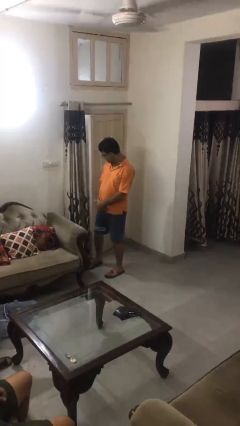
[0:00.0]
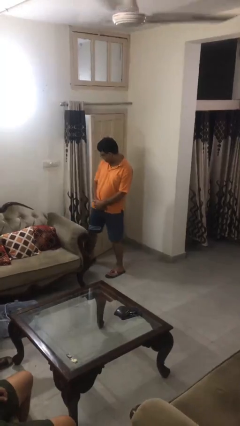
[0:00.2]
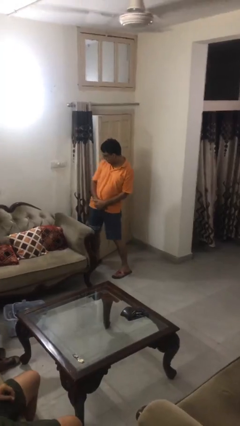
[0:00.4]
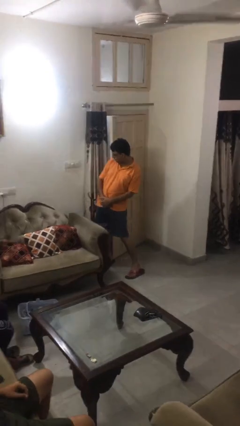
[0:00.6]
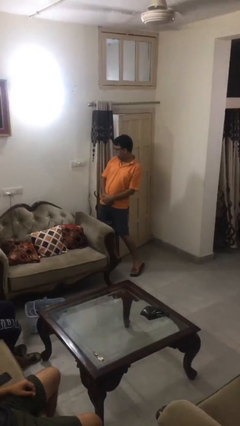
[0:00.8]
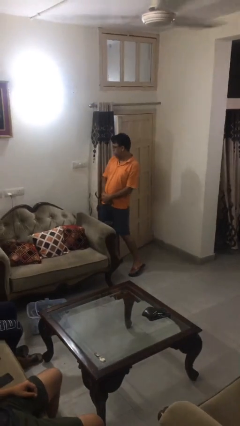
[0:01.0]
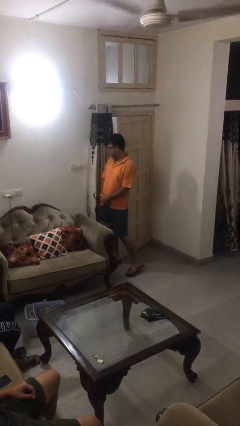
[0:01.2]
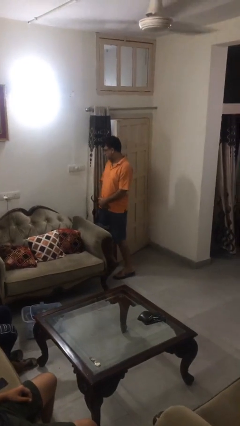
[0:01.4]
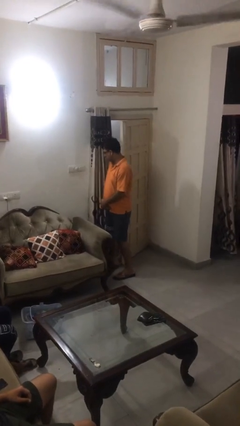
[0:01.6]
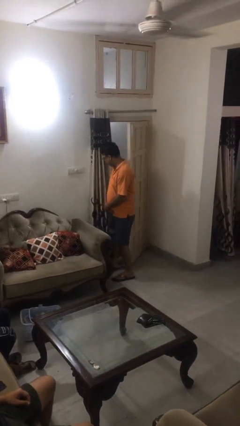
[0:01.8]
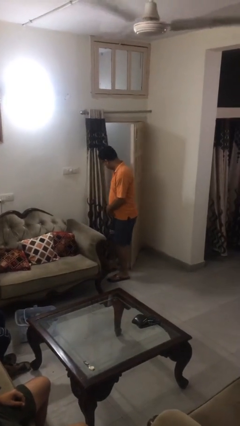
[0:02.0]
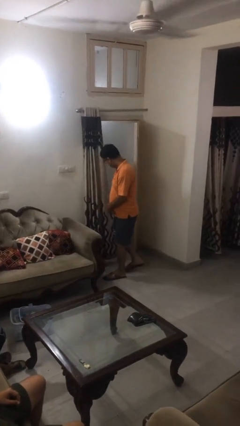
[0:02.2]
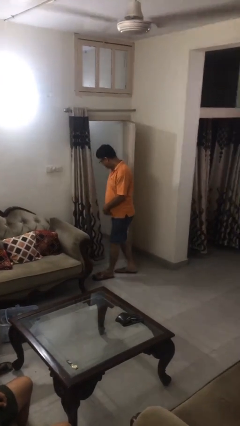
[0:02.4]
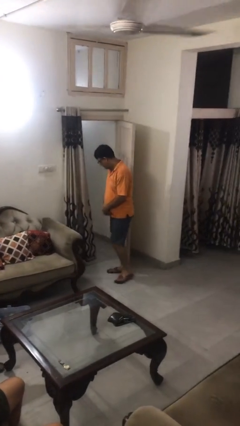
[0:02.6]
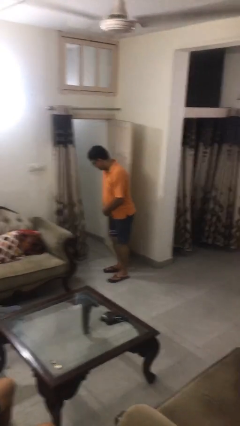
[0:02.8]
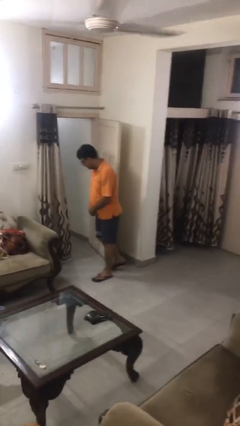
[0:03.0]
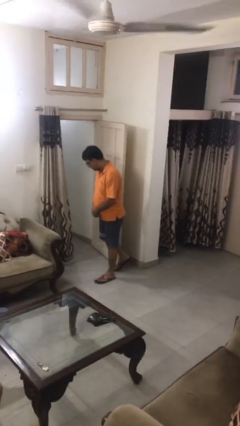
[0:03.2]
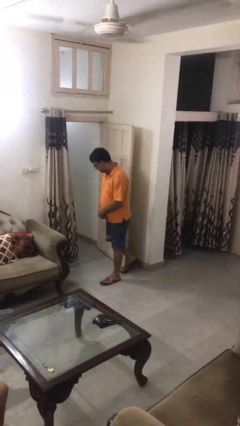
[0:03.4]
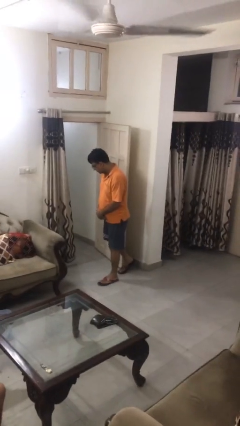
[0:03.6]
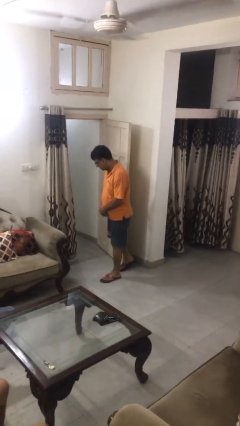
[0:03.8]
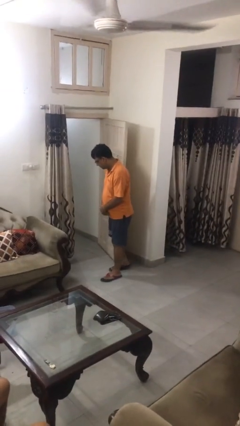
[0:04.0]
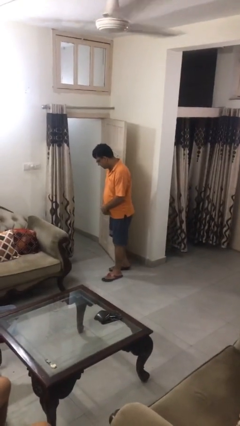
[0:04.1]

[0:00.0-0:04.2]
person opens facility door

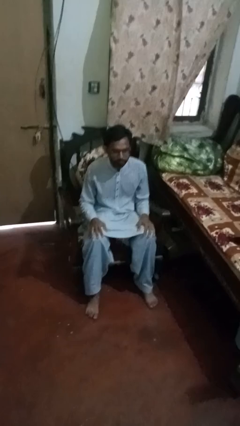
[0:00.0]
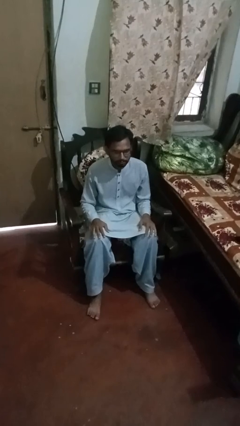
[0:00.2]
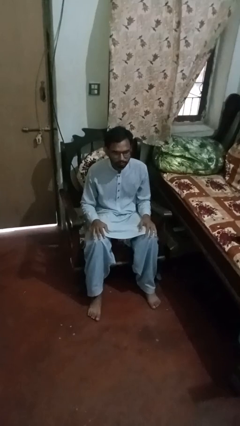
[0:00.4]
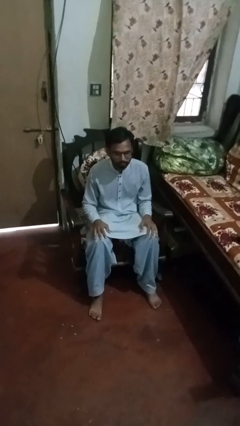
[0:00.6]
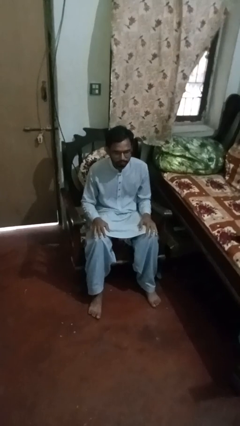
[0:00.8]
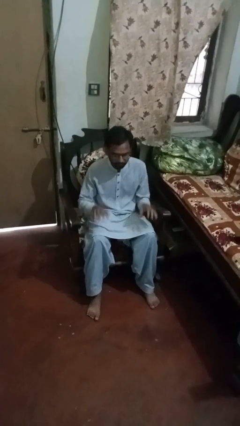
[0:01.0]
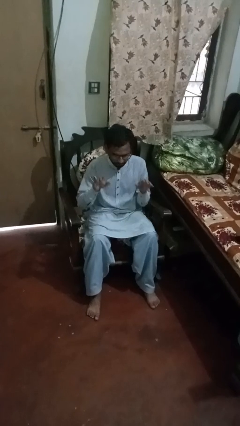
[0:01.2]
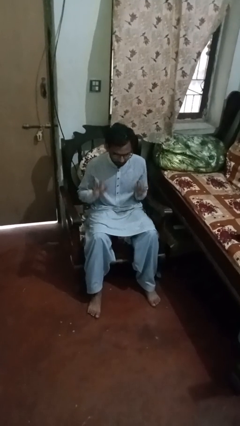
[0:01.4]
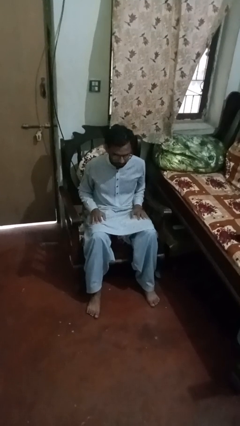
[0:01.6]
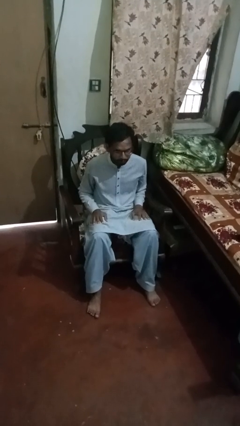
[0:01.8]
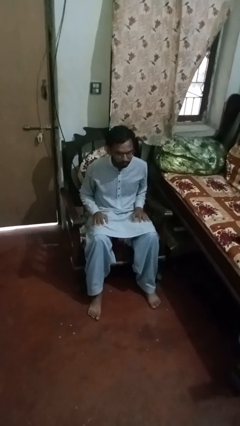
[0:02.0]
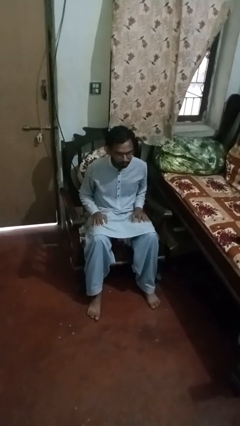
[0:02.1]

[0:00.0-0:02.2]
person slaps hands on thighs

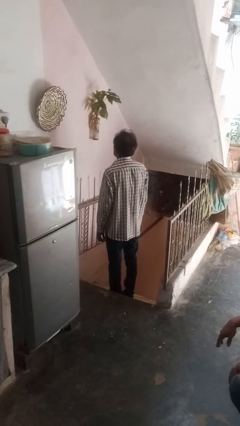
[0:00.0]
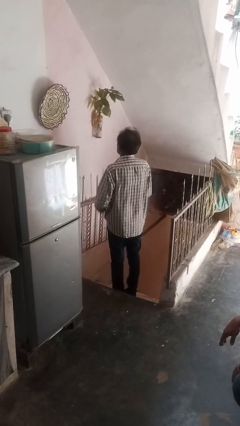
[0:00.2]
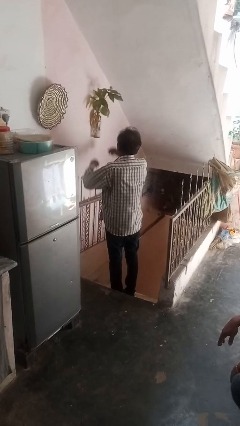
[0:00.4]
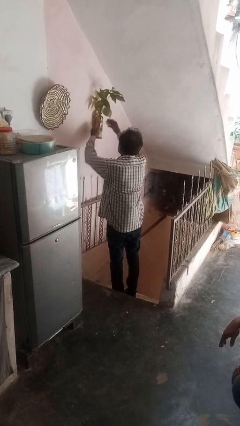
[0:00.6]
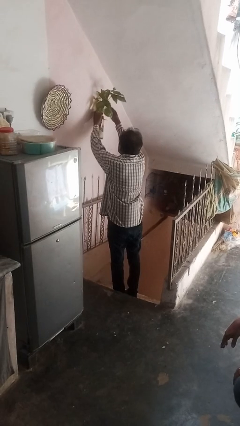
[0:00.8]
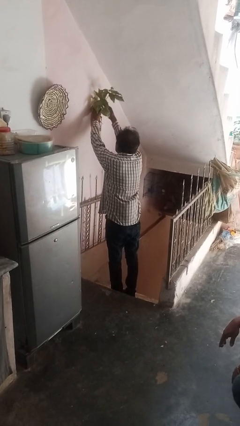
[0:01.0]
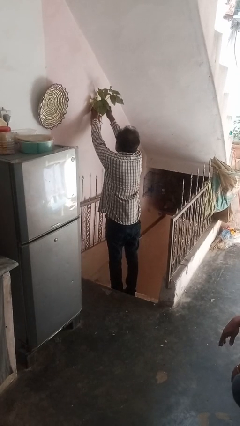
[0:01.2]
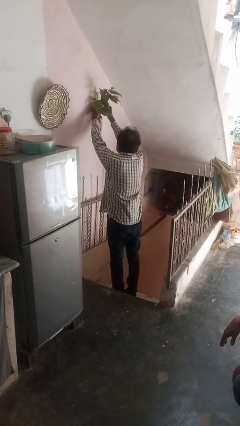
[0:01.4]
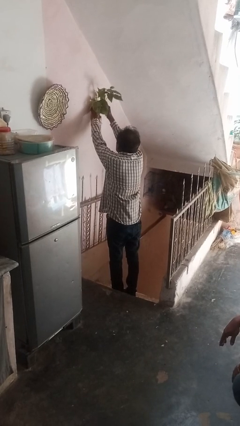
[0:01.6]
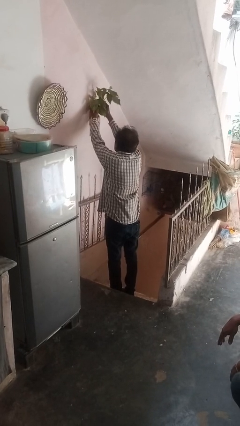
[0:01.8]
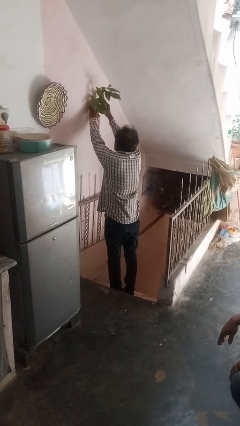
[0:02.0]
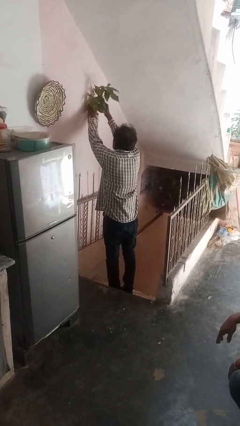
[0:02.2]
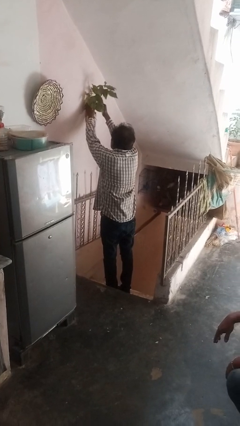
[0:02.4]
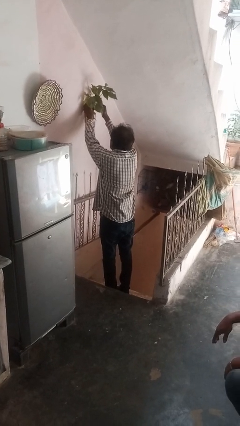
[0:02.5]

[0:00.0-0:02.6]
person bumps into table

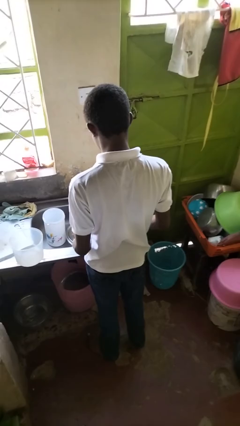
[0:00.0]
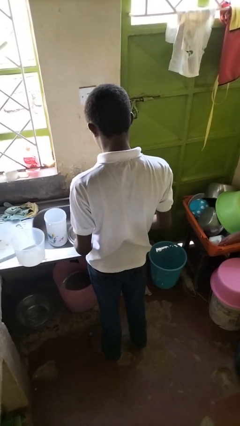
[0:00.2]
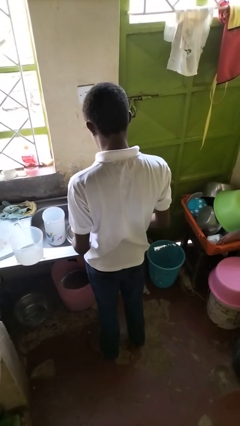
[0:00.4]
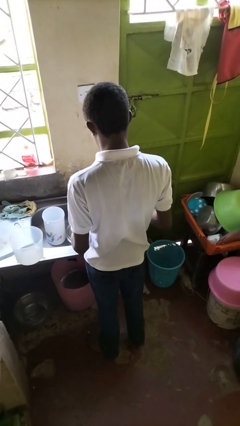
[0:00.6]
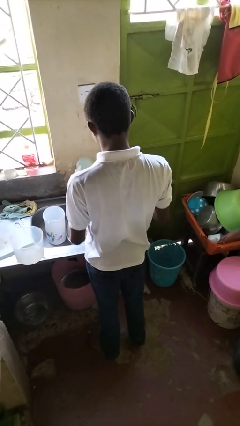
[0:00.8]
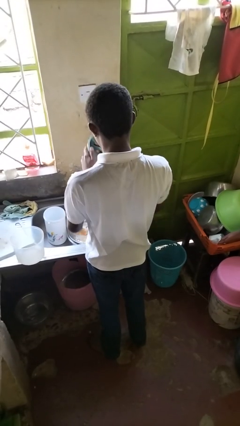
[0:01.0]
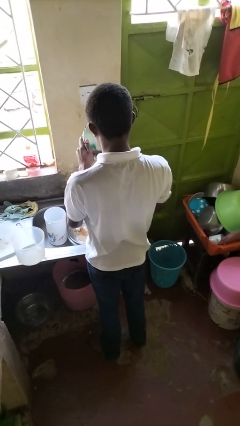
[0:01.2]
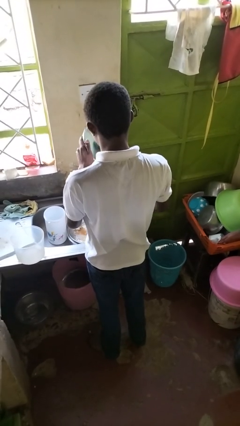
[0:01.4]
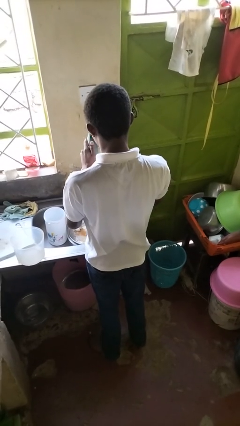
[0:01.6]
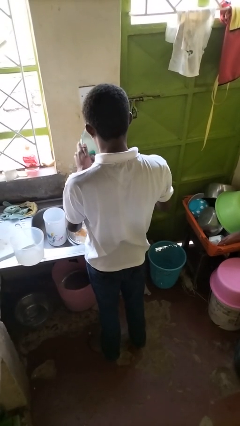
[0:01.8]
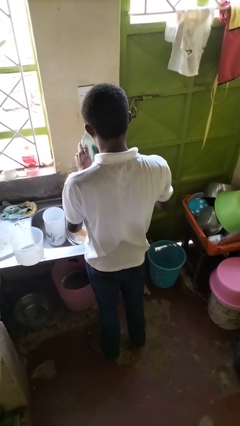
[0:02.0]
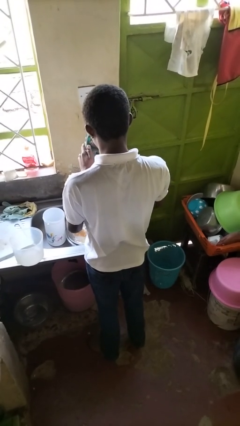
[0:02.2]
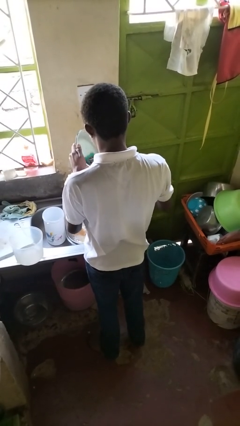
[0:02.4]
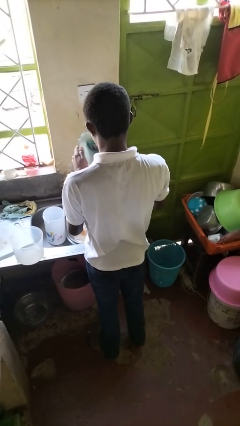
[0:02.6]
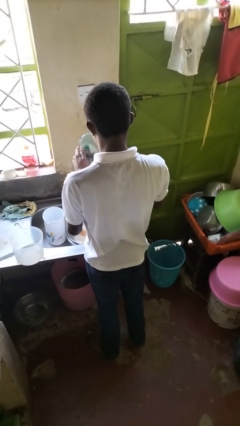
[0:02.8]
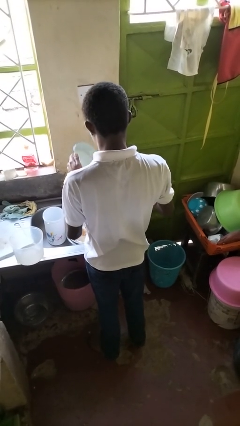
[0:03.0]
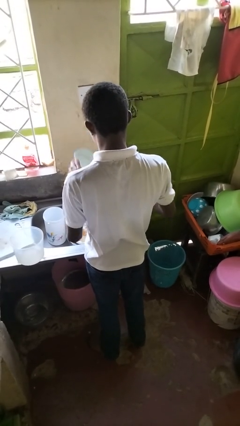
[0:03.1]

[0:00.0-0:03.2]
person washes dish

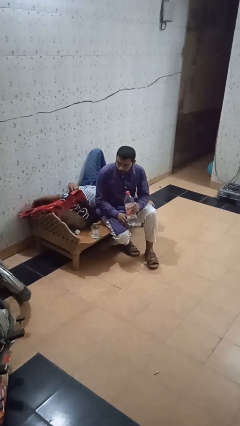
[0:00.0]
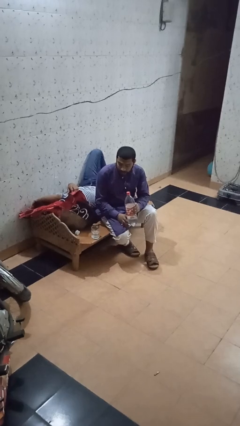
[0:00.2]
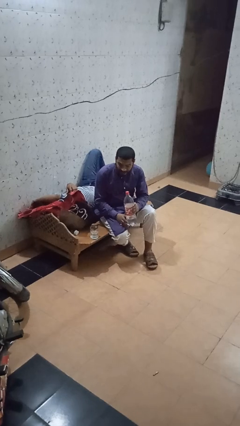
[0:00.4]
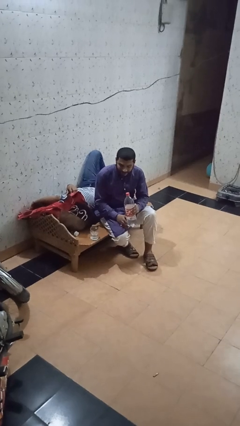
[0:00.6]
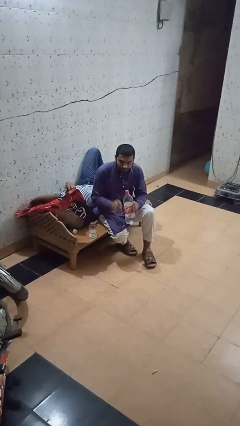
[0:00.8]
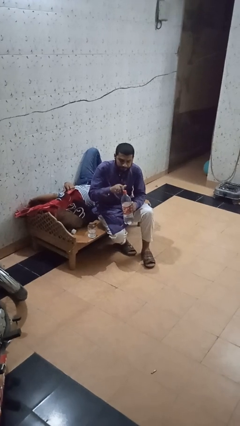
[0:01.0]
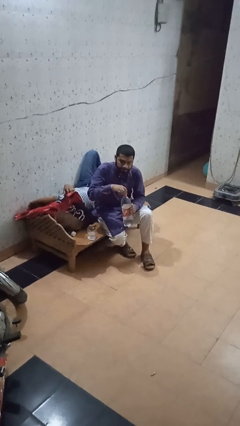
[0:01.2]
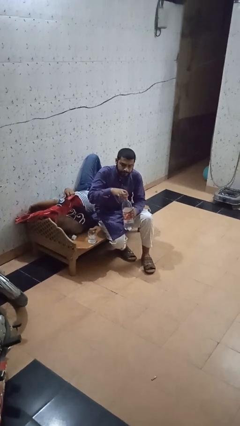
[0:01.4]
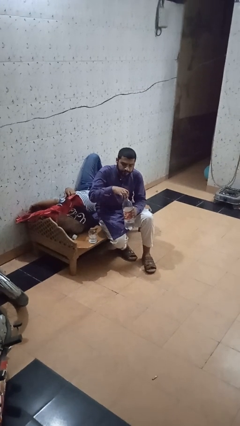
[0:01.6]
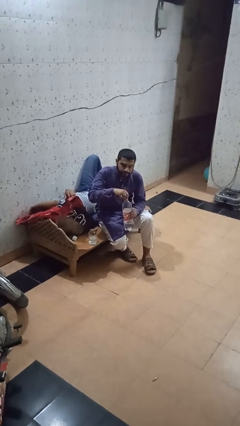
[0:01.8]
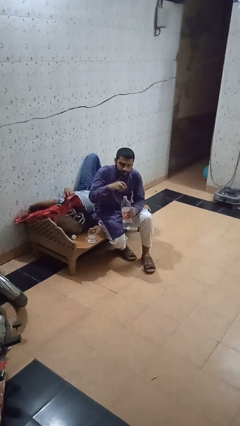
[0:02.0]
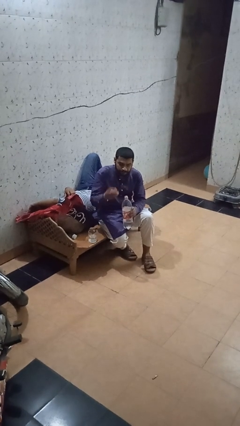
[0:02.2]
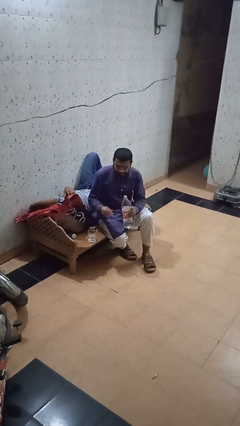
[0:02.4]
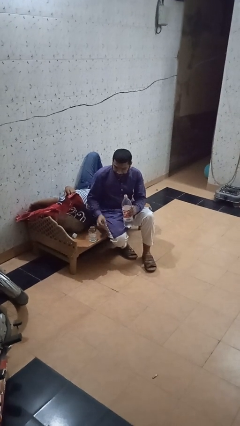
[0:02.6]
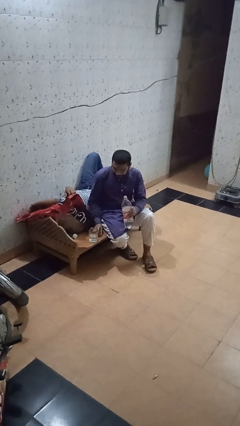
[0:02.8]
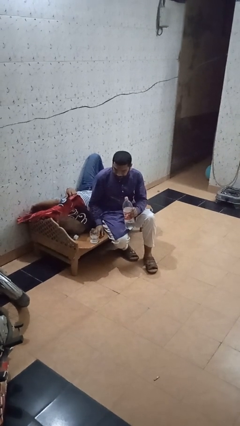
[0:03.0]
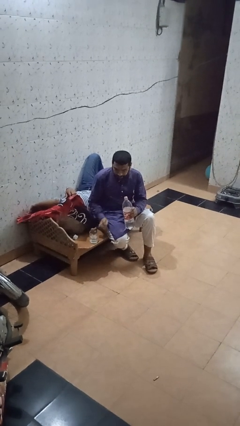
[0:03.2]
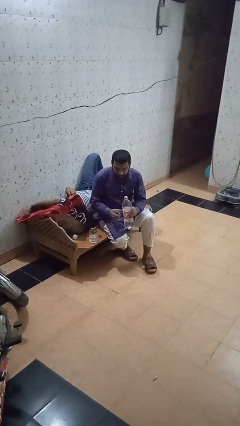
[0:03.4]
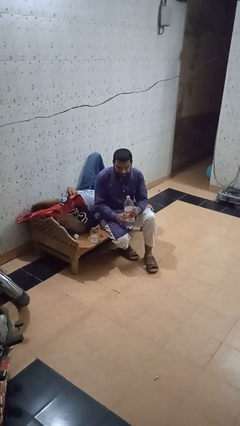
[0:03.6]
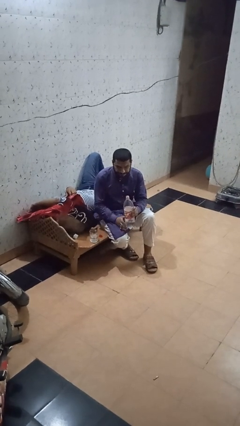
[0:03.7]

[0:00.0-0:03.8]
person unscrews lid from bottle

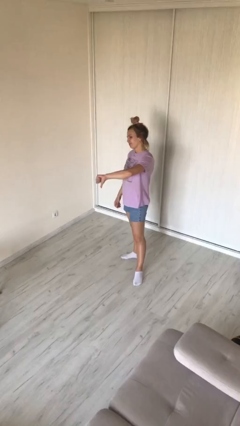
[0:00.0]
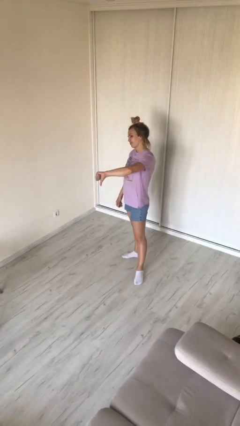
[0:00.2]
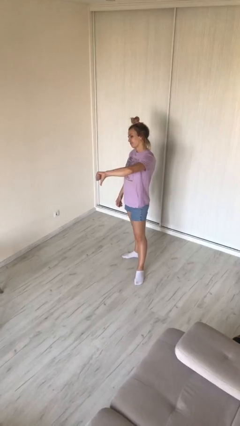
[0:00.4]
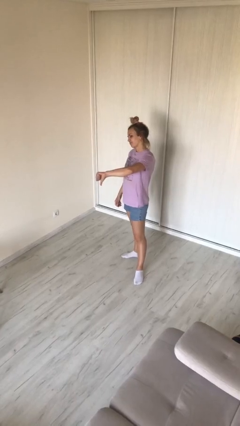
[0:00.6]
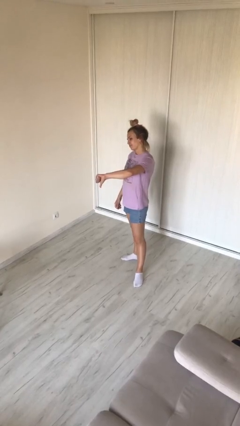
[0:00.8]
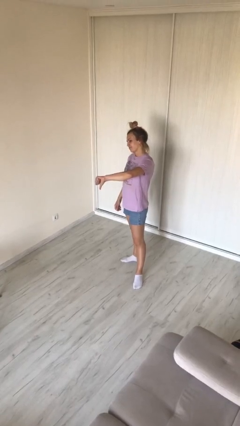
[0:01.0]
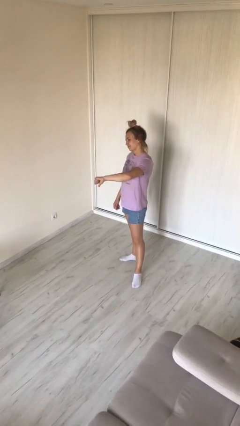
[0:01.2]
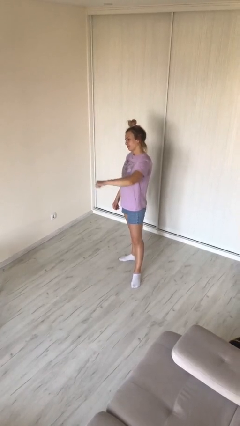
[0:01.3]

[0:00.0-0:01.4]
person gestures thumbs down
